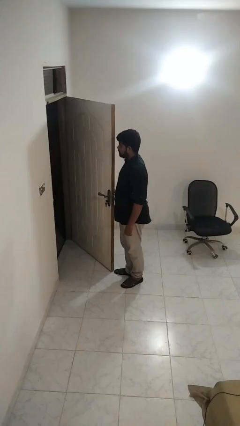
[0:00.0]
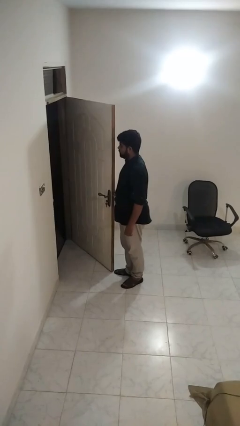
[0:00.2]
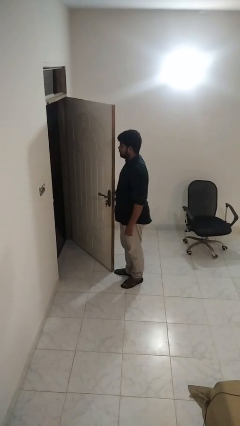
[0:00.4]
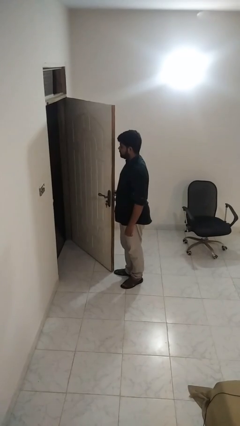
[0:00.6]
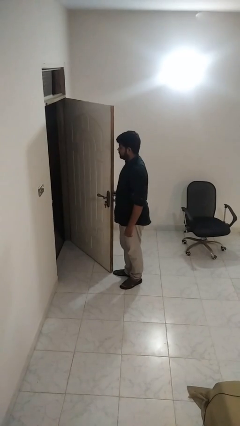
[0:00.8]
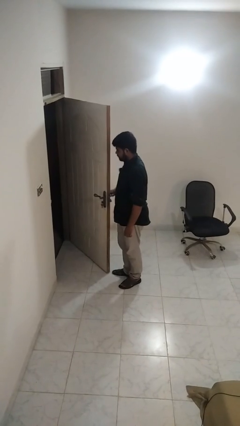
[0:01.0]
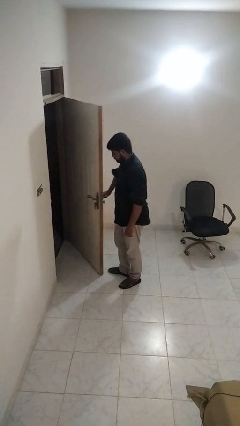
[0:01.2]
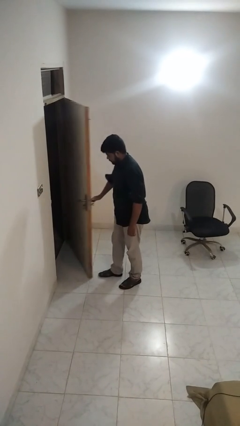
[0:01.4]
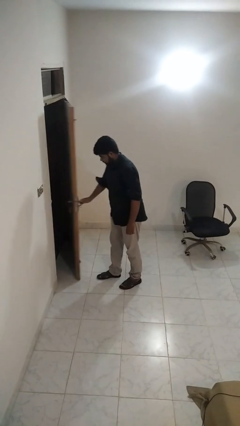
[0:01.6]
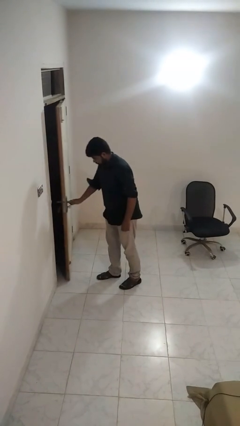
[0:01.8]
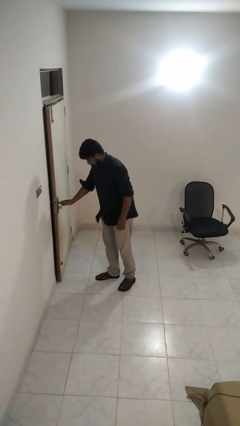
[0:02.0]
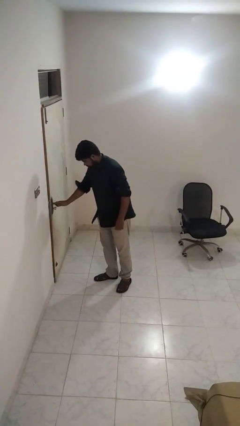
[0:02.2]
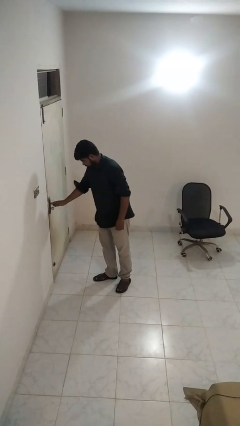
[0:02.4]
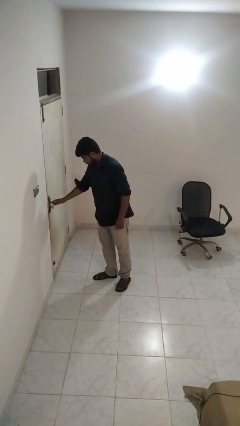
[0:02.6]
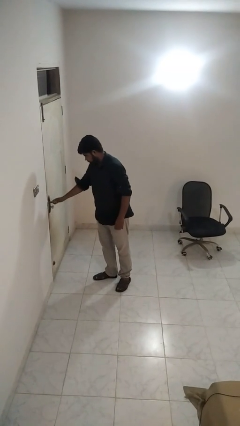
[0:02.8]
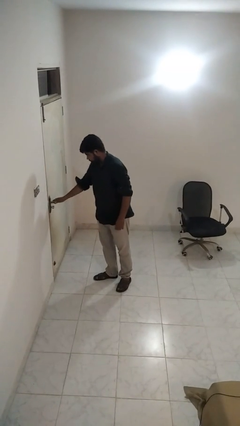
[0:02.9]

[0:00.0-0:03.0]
person closes facility door

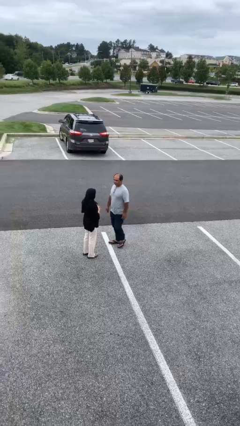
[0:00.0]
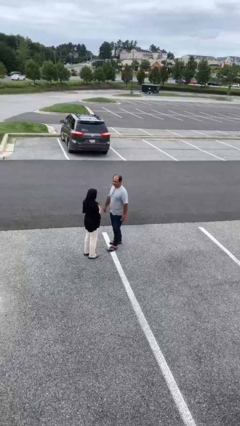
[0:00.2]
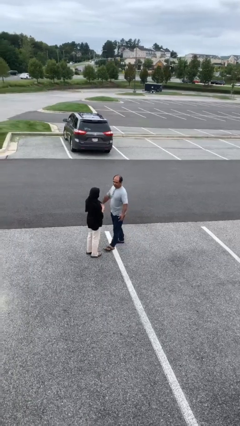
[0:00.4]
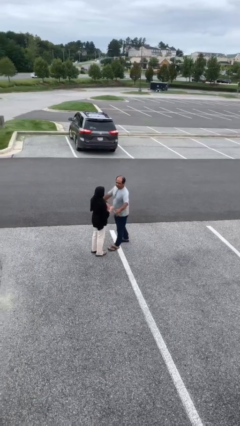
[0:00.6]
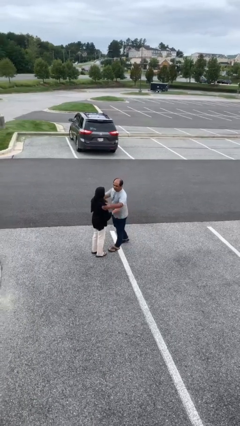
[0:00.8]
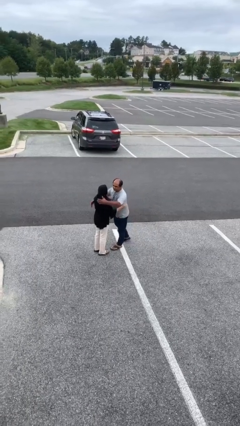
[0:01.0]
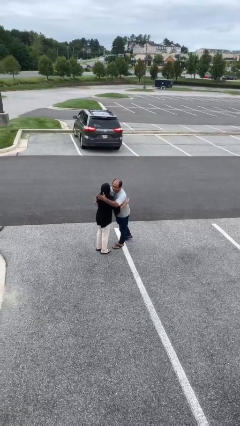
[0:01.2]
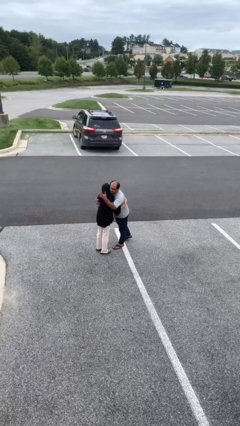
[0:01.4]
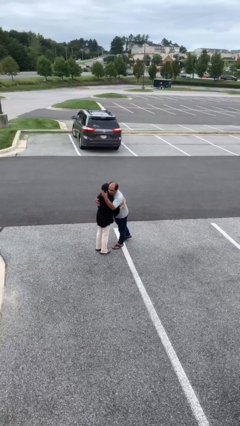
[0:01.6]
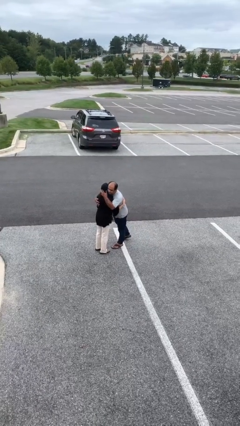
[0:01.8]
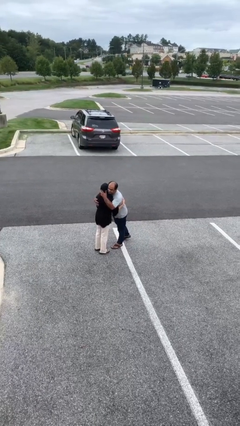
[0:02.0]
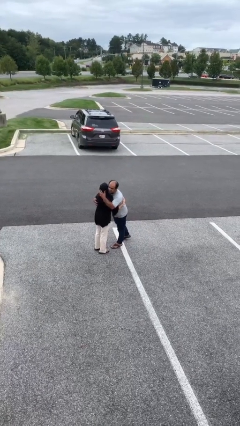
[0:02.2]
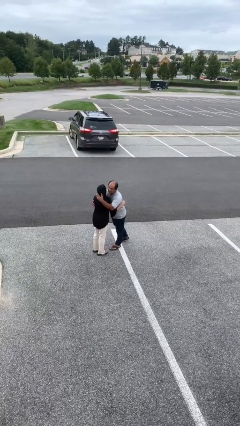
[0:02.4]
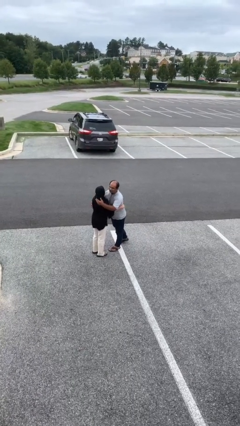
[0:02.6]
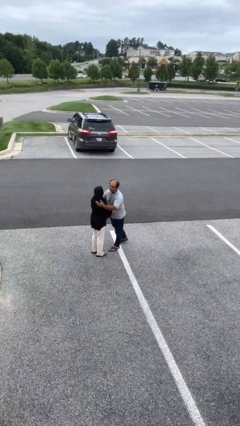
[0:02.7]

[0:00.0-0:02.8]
person embraces person

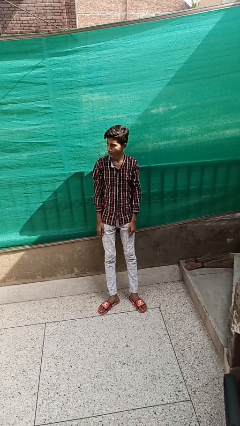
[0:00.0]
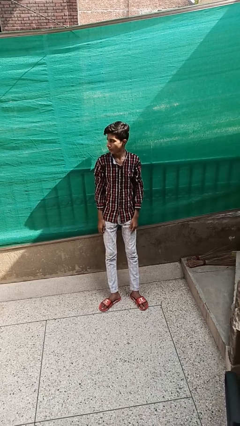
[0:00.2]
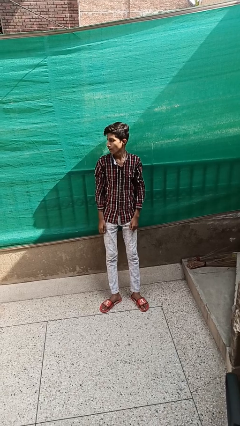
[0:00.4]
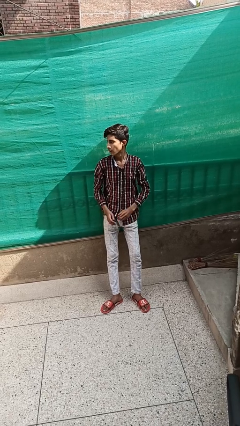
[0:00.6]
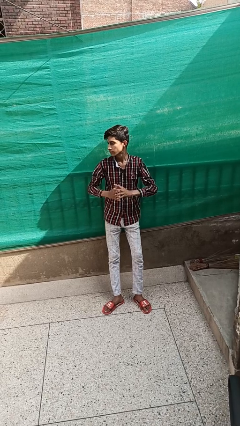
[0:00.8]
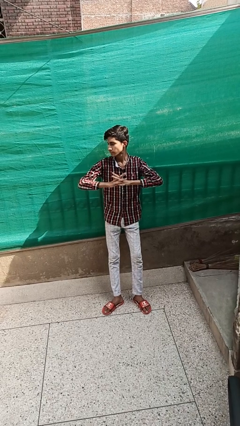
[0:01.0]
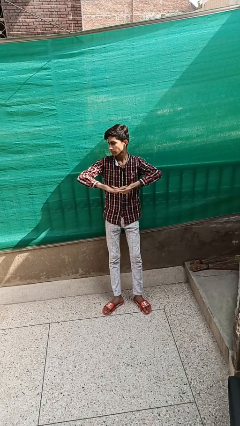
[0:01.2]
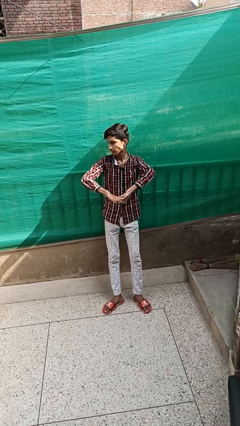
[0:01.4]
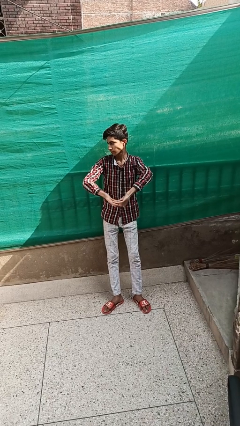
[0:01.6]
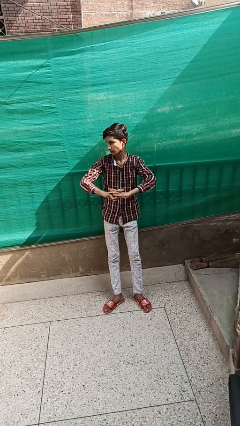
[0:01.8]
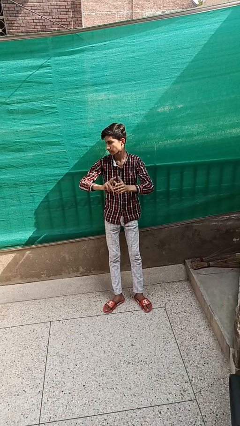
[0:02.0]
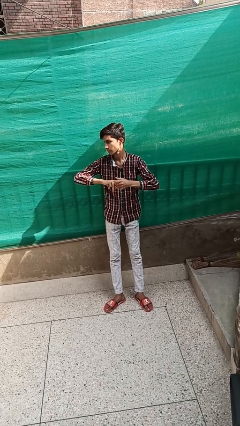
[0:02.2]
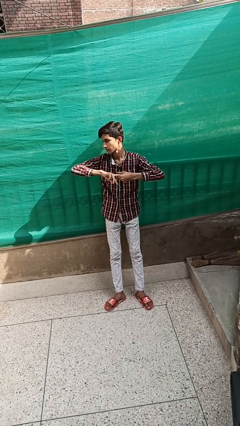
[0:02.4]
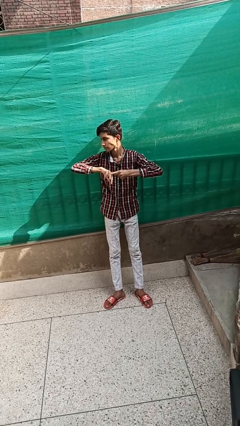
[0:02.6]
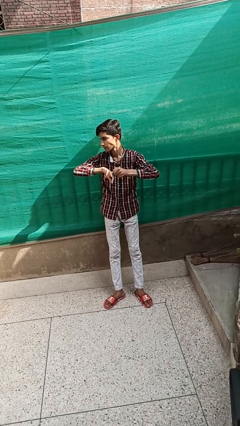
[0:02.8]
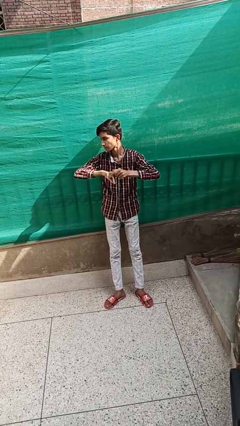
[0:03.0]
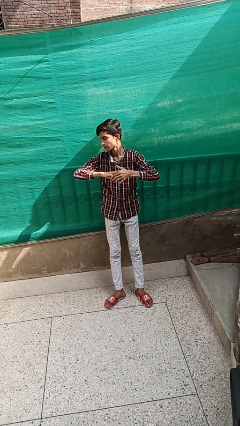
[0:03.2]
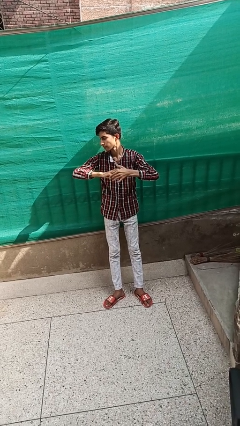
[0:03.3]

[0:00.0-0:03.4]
person cracks knuckles

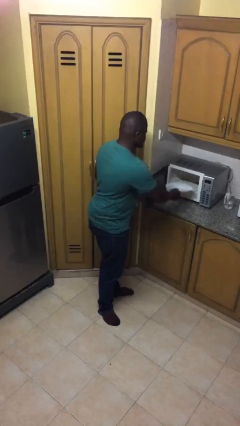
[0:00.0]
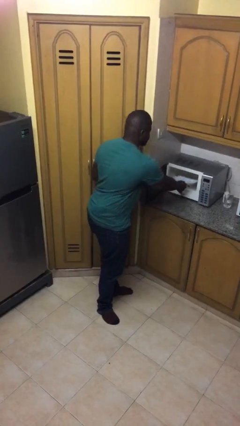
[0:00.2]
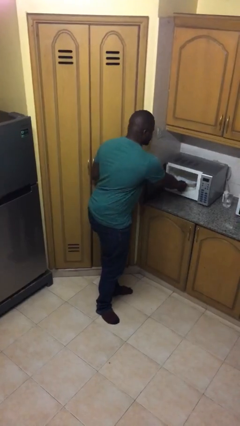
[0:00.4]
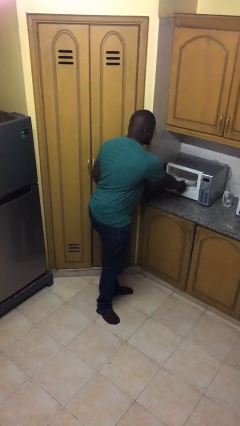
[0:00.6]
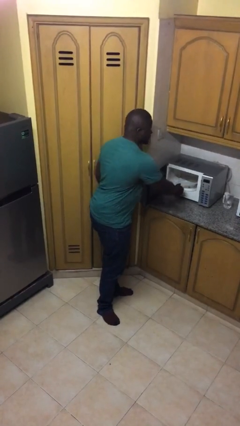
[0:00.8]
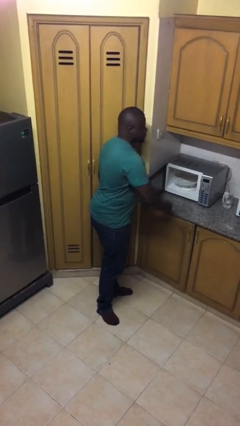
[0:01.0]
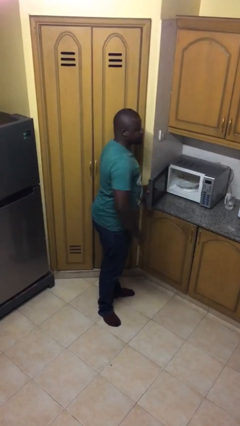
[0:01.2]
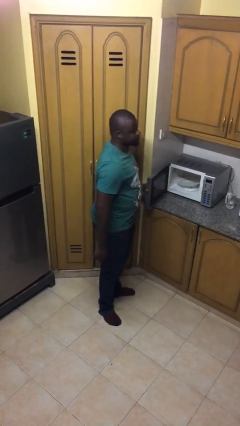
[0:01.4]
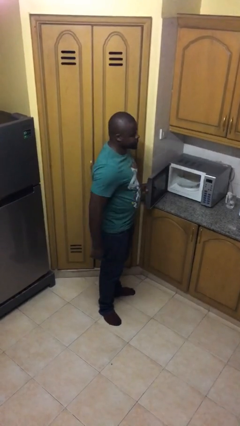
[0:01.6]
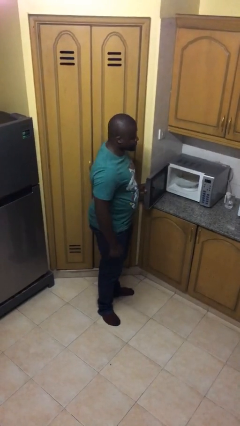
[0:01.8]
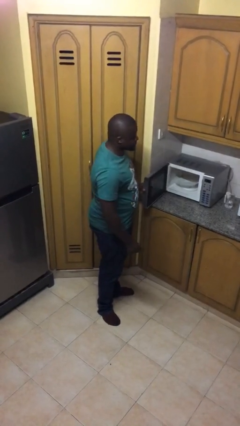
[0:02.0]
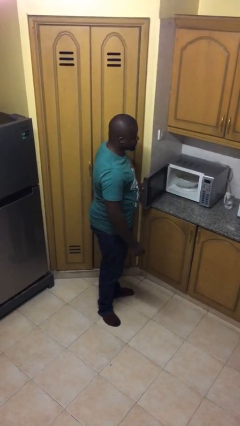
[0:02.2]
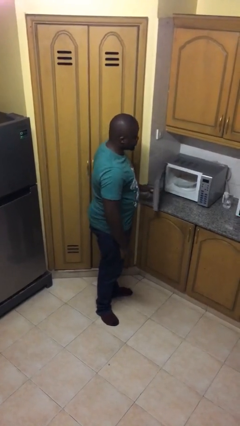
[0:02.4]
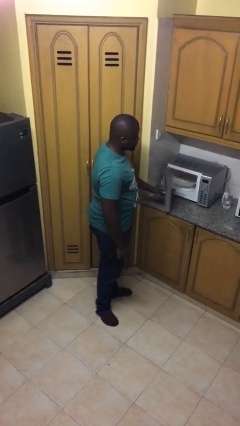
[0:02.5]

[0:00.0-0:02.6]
person puts object into microwave

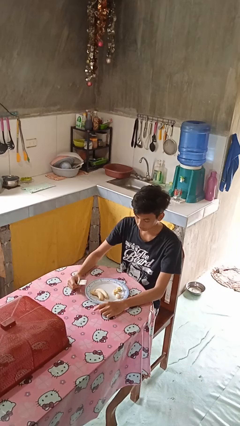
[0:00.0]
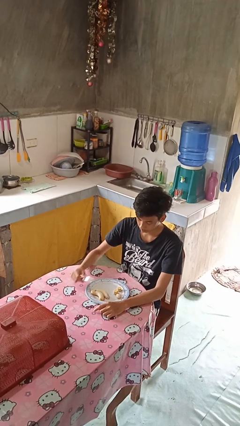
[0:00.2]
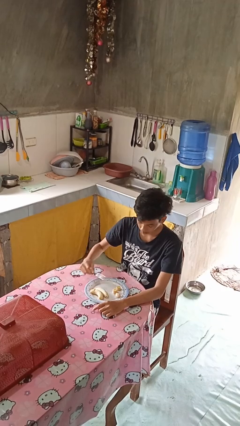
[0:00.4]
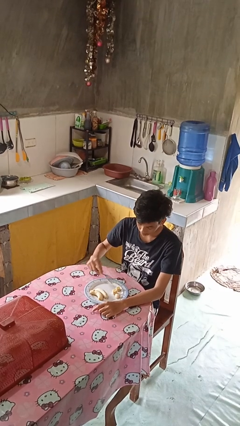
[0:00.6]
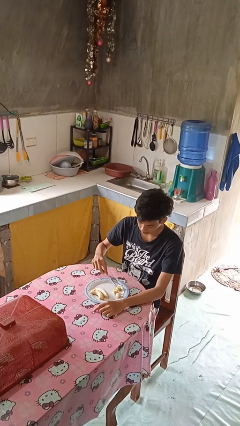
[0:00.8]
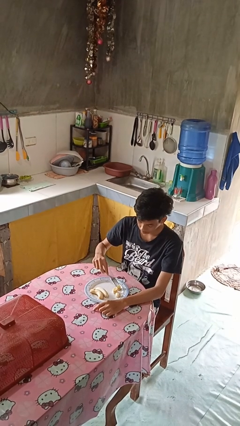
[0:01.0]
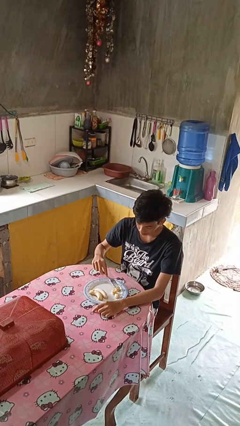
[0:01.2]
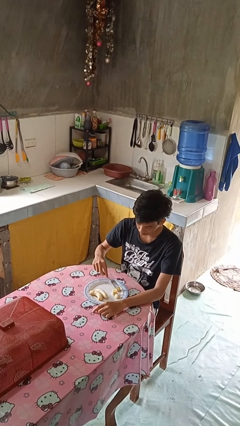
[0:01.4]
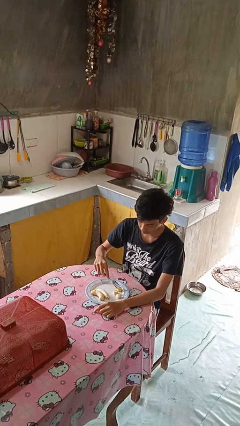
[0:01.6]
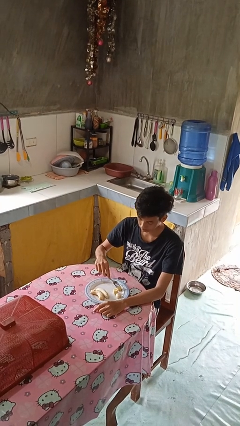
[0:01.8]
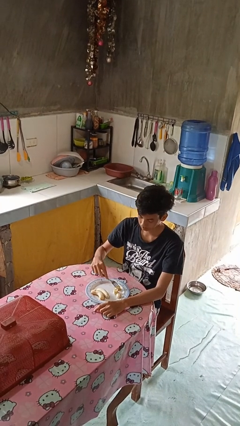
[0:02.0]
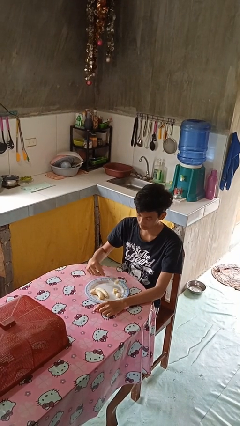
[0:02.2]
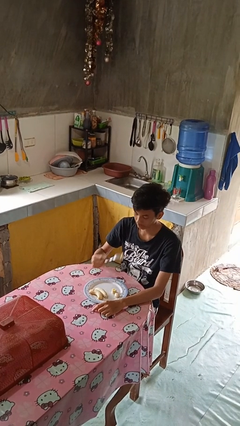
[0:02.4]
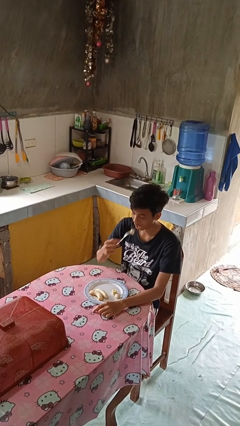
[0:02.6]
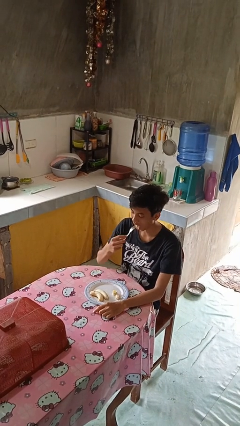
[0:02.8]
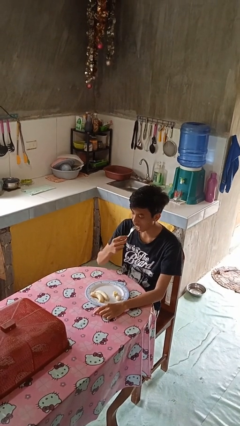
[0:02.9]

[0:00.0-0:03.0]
person eats with utensil

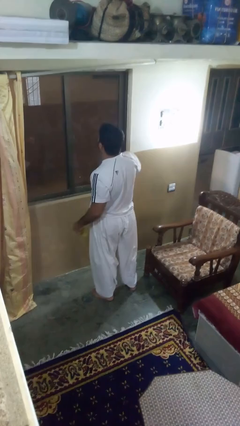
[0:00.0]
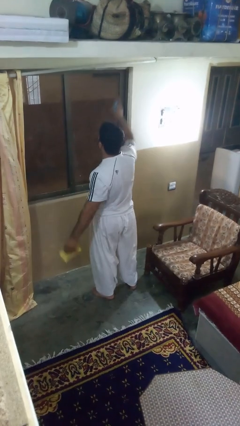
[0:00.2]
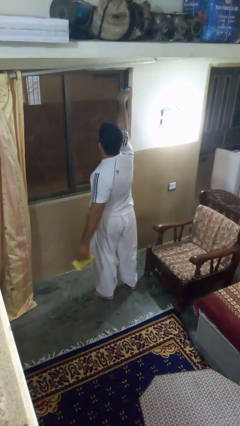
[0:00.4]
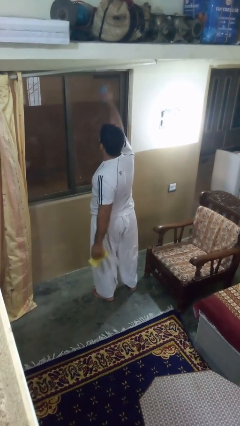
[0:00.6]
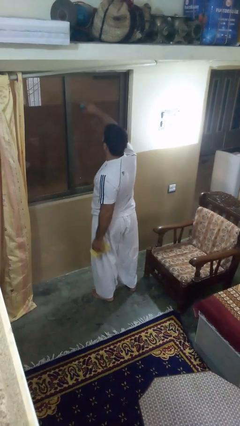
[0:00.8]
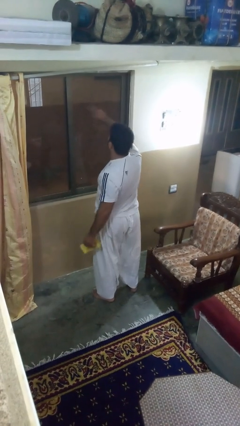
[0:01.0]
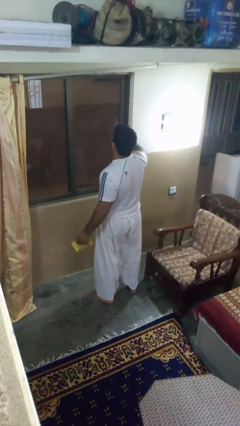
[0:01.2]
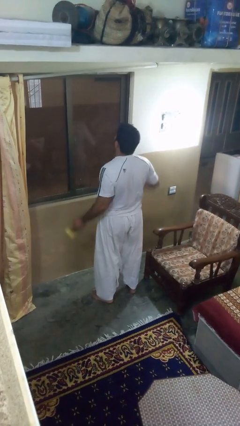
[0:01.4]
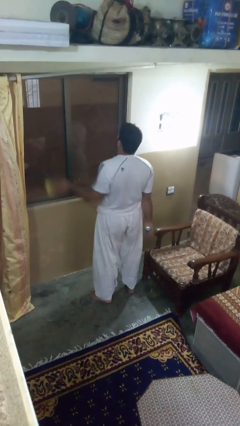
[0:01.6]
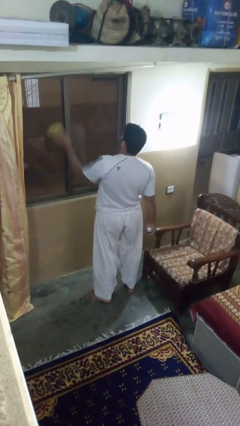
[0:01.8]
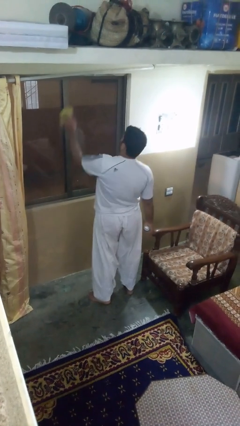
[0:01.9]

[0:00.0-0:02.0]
person sprays from bottle

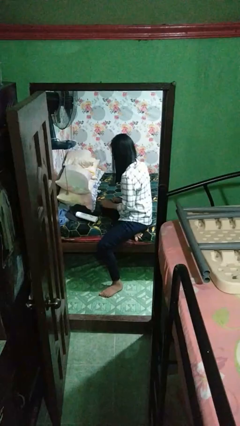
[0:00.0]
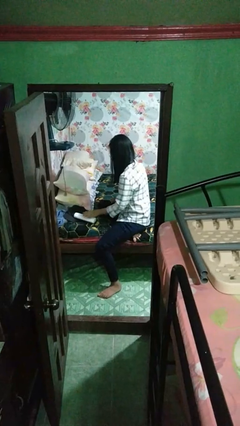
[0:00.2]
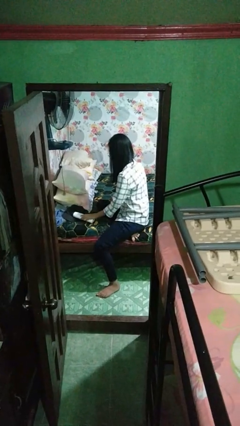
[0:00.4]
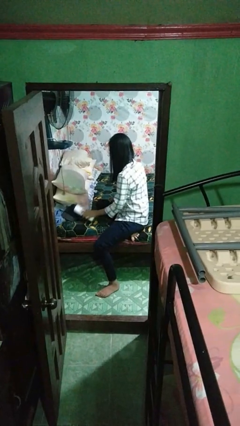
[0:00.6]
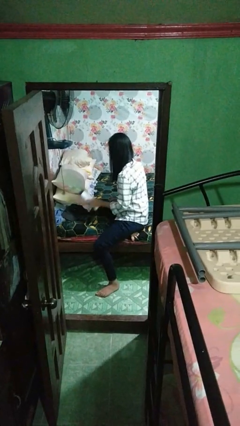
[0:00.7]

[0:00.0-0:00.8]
person picks up object from bed
